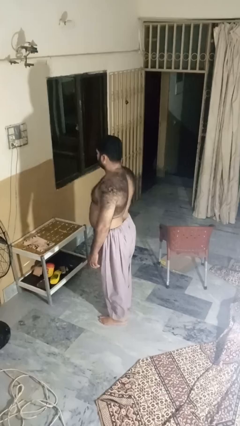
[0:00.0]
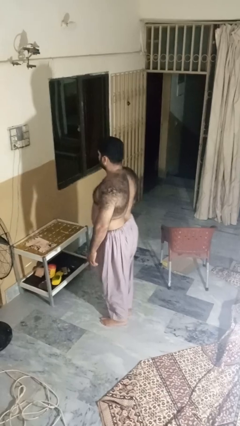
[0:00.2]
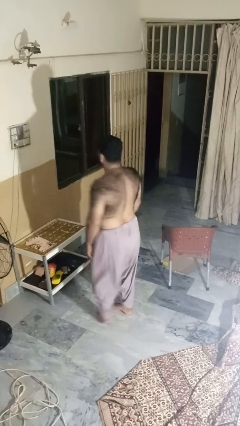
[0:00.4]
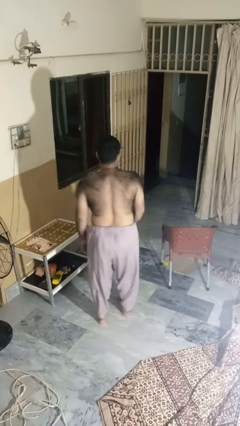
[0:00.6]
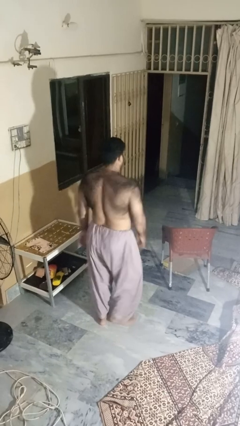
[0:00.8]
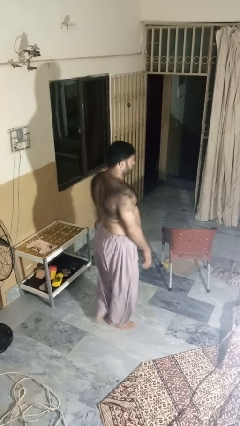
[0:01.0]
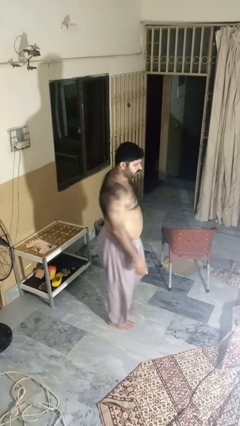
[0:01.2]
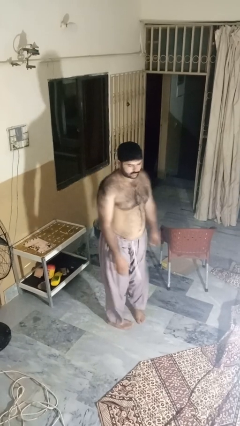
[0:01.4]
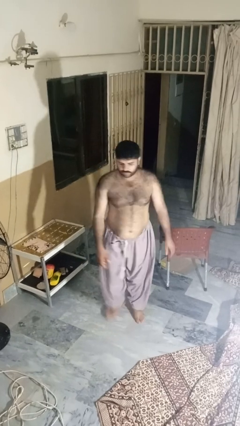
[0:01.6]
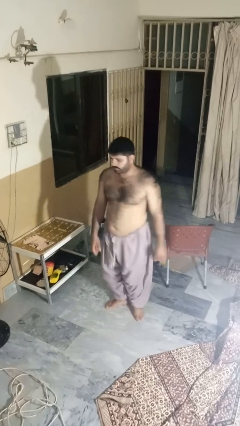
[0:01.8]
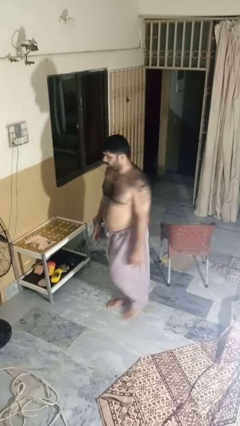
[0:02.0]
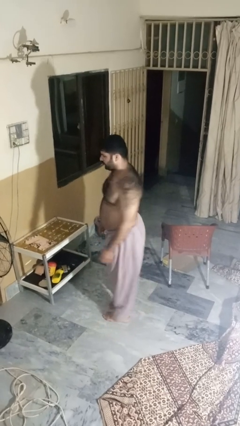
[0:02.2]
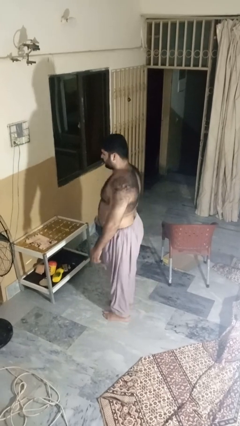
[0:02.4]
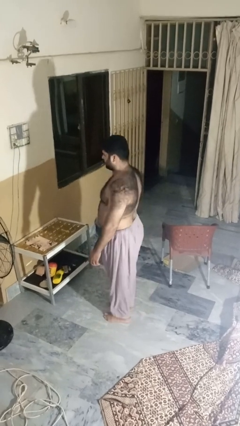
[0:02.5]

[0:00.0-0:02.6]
person twirls

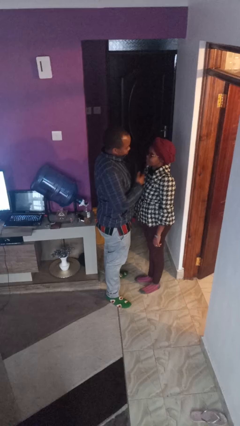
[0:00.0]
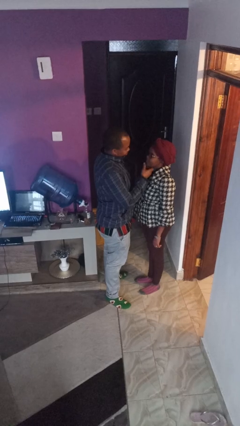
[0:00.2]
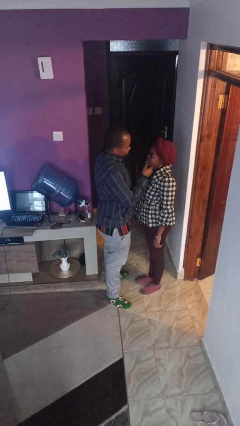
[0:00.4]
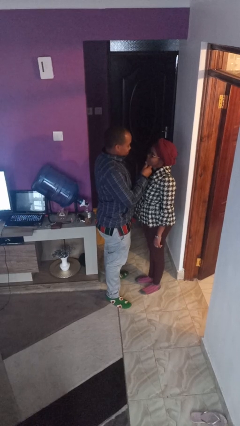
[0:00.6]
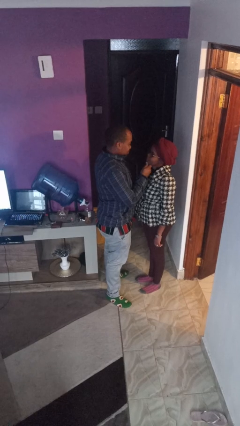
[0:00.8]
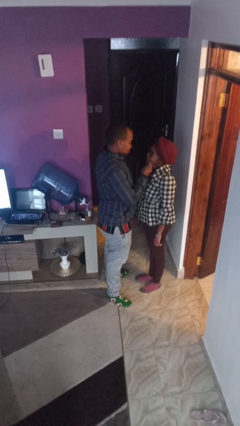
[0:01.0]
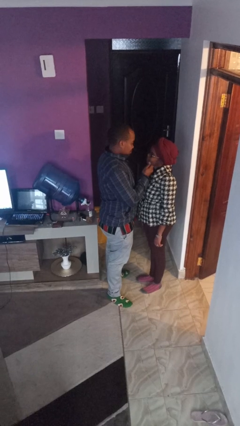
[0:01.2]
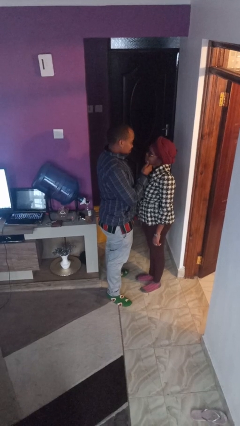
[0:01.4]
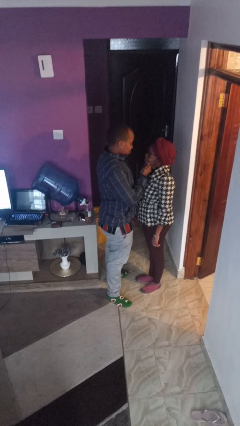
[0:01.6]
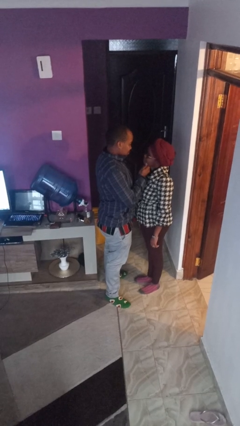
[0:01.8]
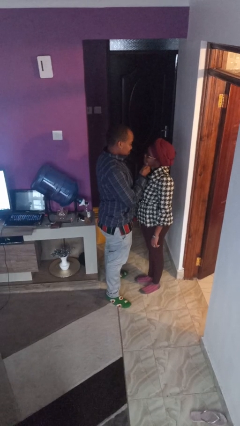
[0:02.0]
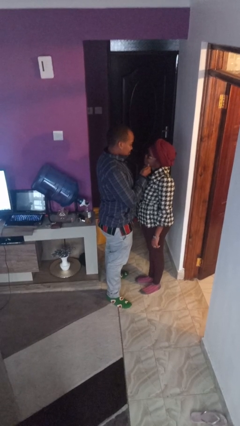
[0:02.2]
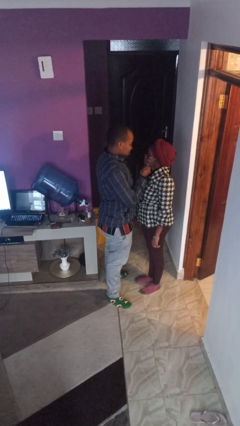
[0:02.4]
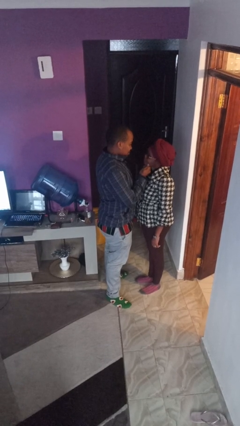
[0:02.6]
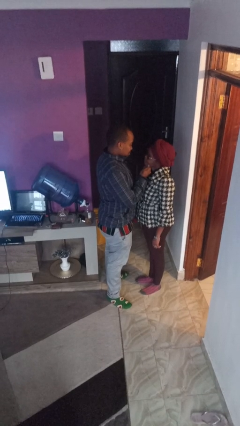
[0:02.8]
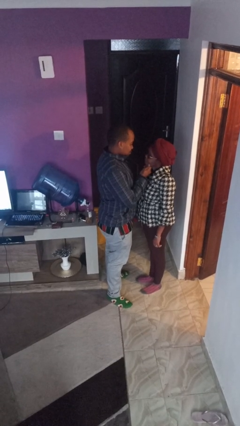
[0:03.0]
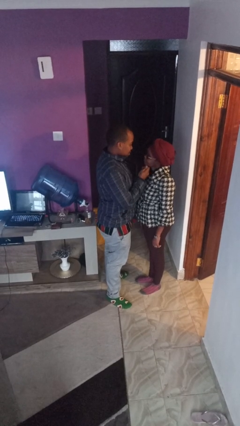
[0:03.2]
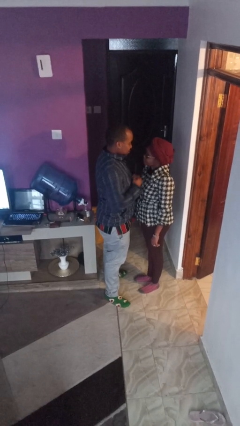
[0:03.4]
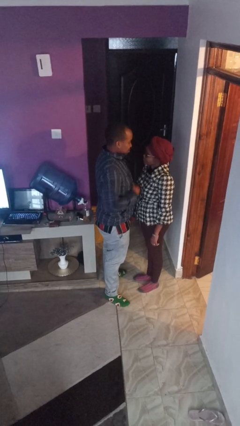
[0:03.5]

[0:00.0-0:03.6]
person touches face of person

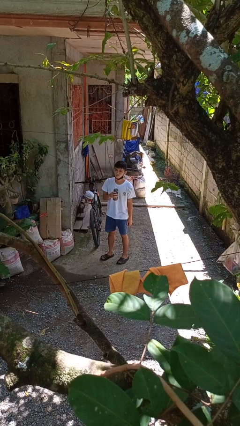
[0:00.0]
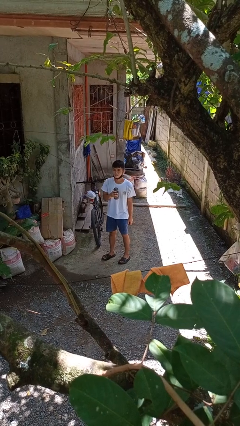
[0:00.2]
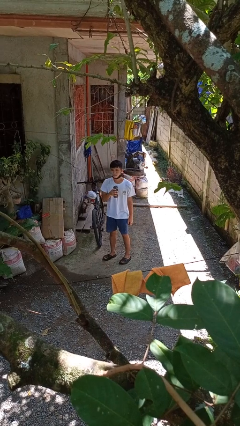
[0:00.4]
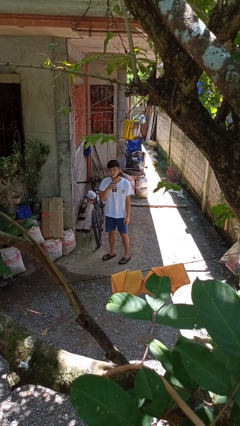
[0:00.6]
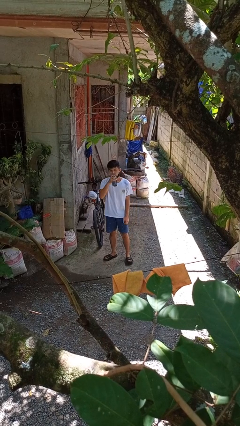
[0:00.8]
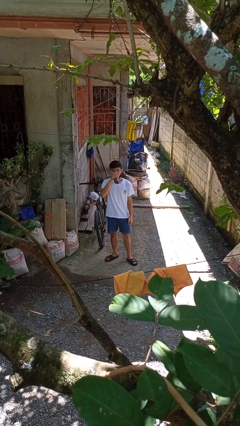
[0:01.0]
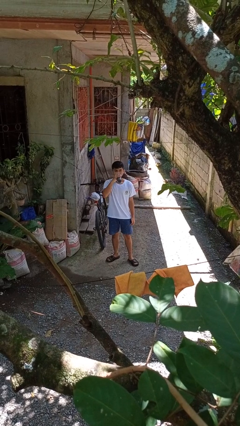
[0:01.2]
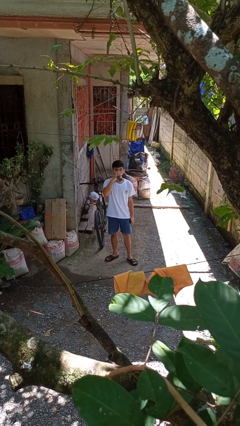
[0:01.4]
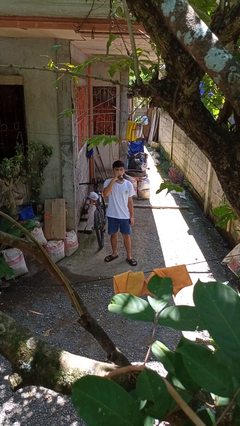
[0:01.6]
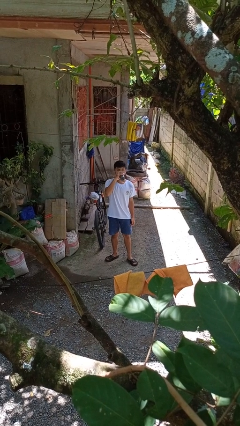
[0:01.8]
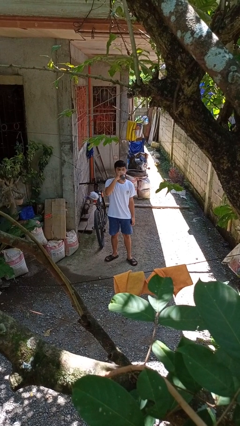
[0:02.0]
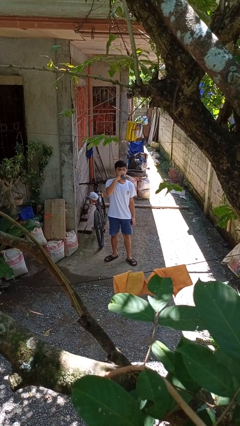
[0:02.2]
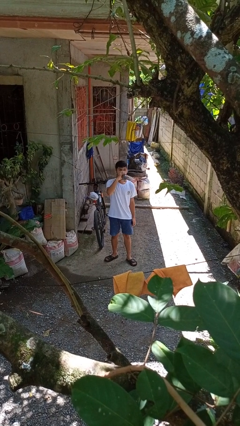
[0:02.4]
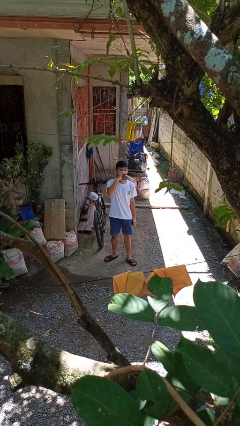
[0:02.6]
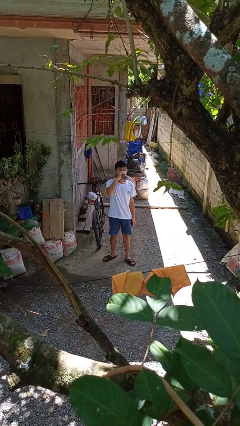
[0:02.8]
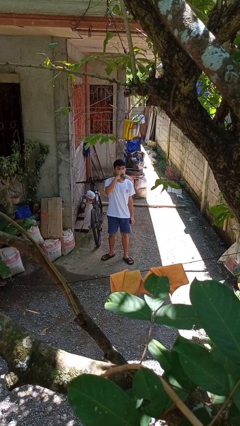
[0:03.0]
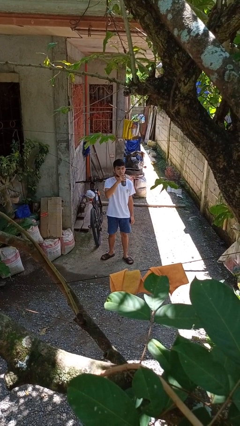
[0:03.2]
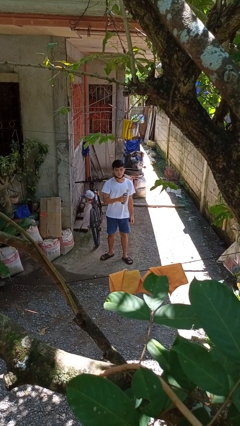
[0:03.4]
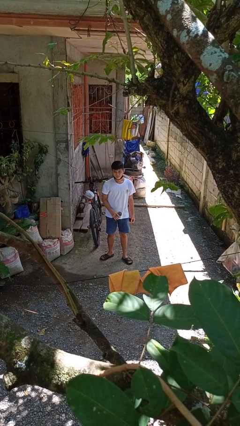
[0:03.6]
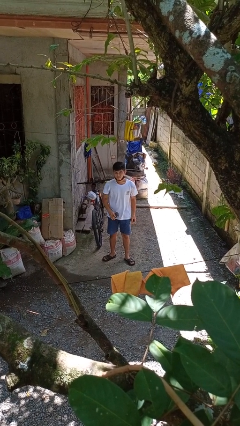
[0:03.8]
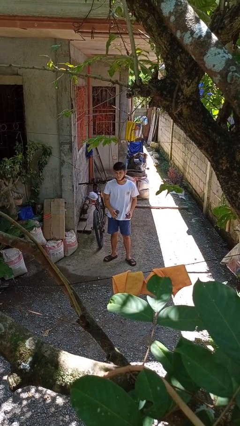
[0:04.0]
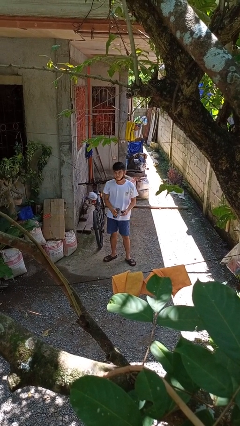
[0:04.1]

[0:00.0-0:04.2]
person drinks from bottle

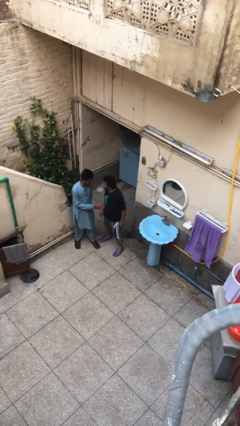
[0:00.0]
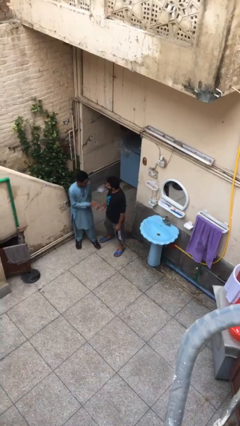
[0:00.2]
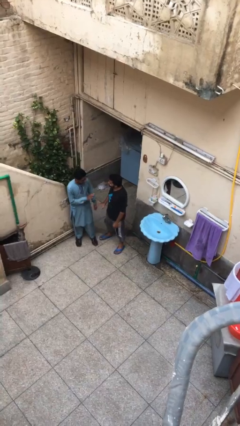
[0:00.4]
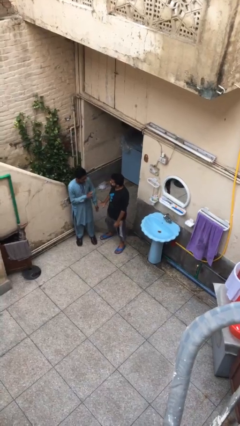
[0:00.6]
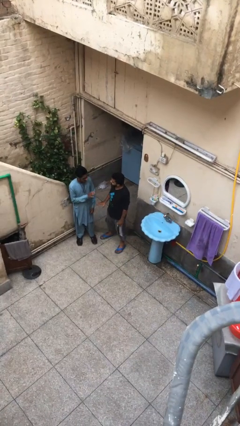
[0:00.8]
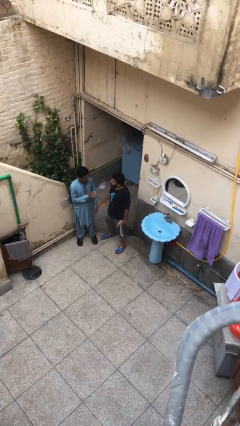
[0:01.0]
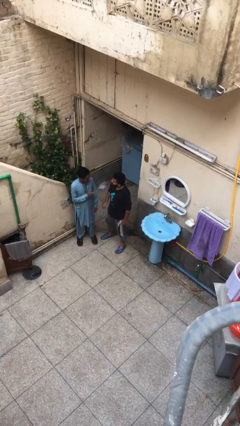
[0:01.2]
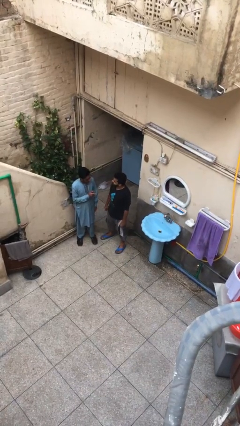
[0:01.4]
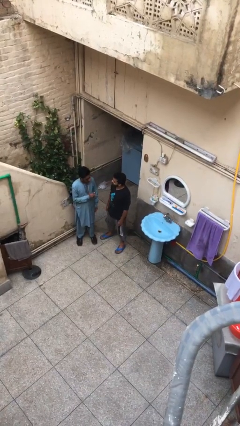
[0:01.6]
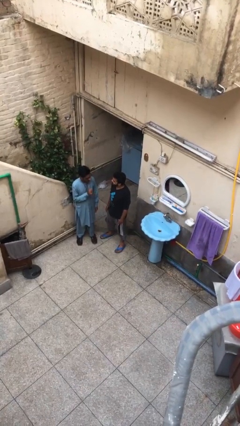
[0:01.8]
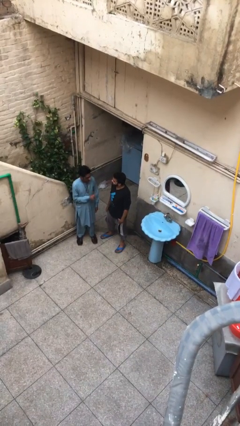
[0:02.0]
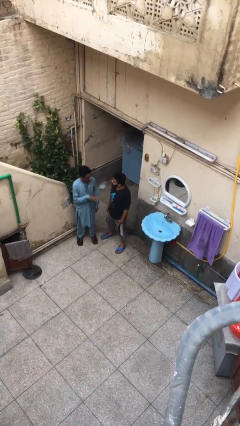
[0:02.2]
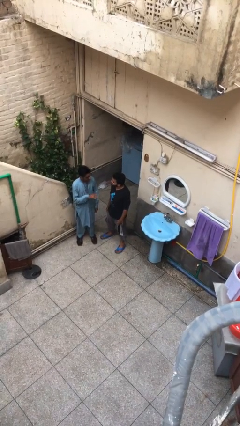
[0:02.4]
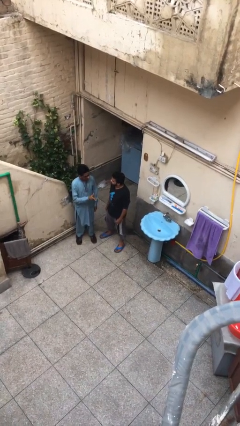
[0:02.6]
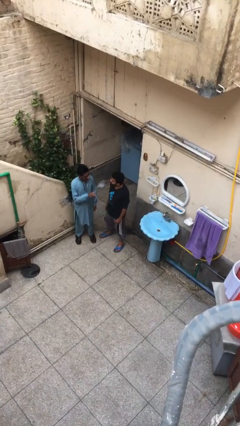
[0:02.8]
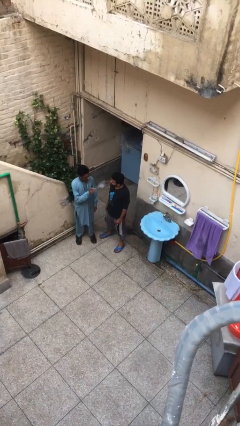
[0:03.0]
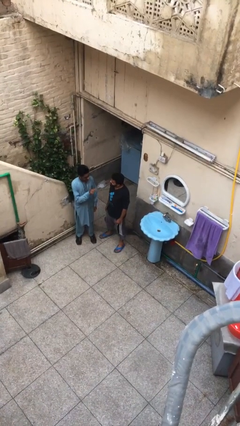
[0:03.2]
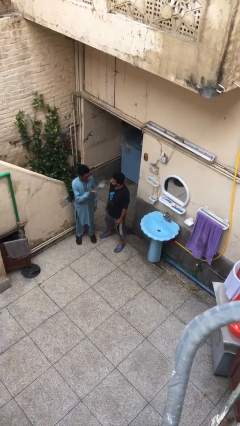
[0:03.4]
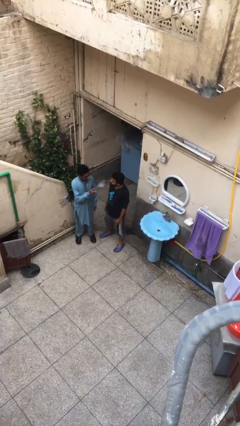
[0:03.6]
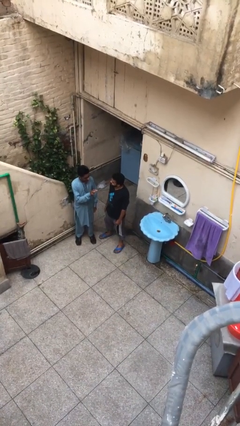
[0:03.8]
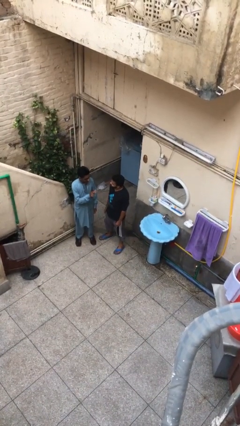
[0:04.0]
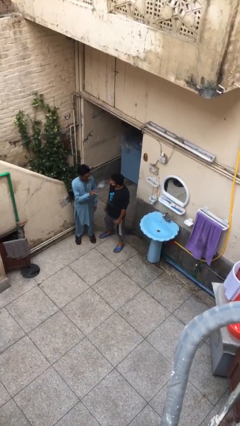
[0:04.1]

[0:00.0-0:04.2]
person talks to person

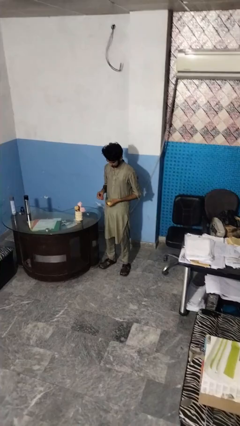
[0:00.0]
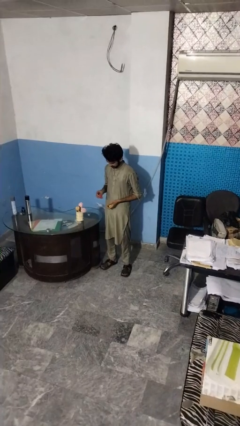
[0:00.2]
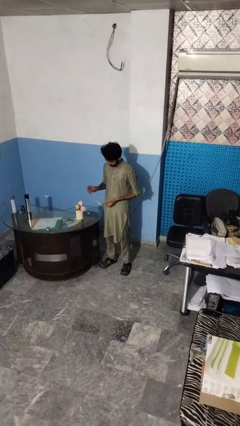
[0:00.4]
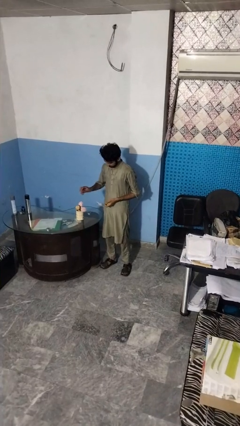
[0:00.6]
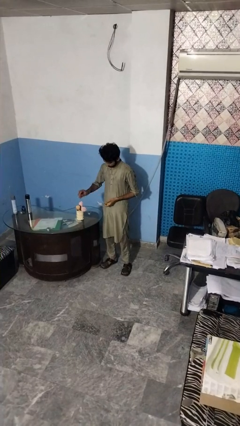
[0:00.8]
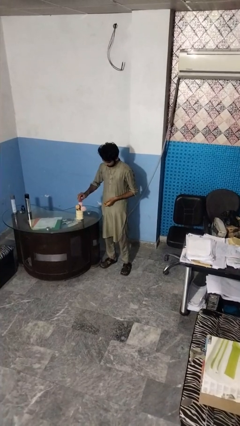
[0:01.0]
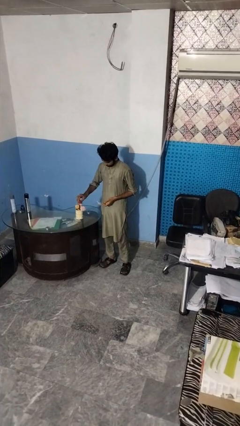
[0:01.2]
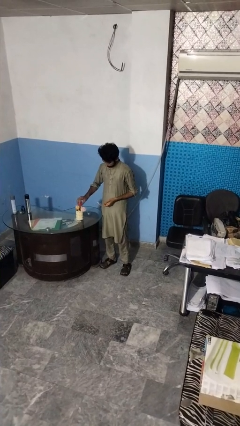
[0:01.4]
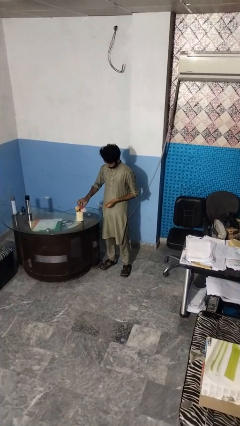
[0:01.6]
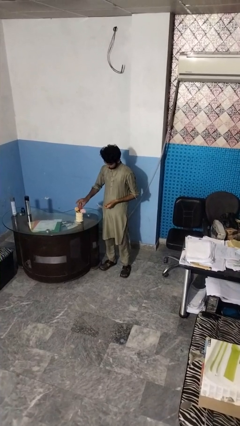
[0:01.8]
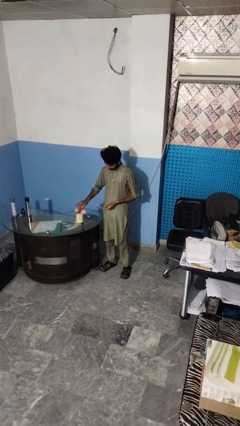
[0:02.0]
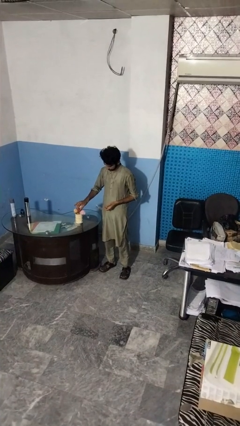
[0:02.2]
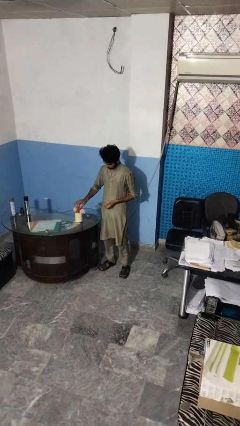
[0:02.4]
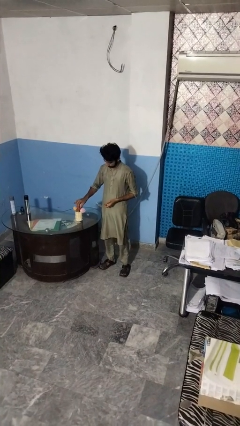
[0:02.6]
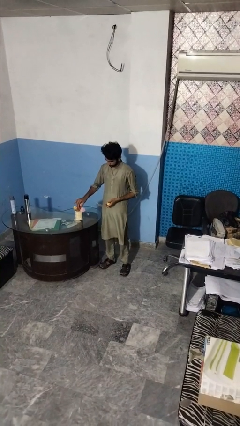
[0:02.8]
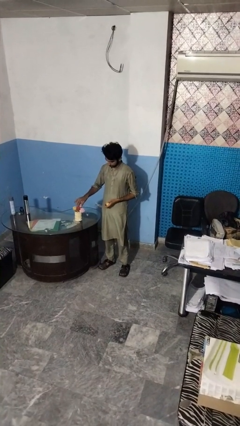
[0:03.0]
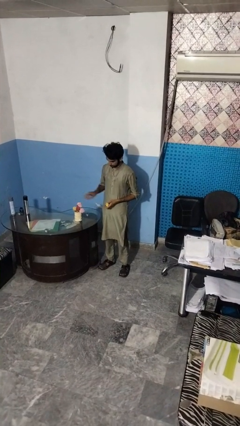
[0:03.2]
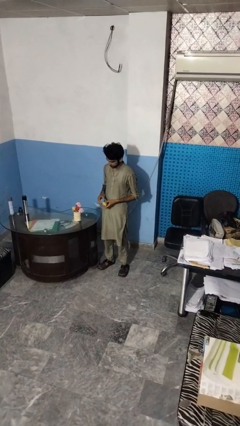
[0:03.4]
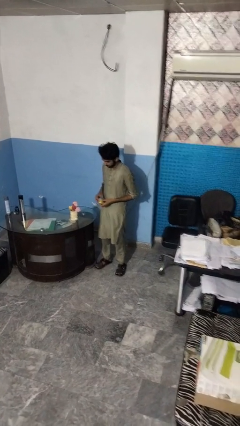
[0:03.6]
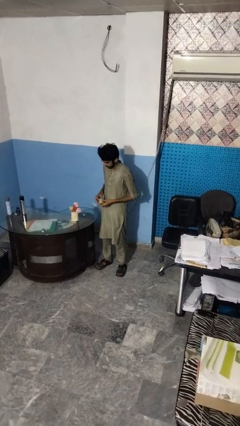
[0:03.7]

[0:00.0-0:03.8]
person arranges flowers in vase
